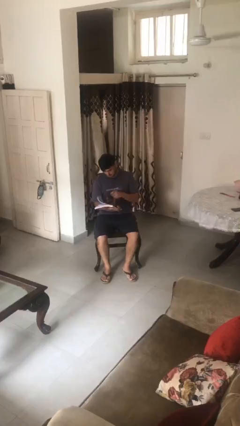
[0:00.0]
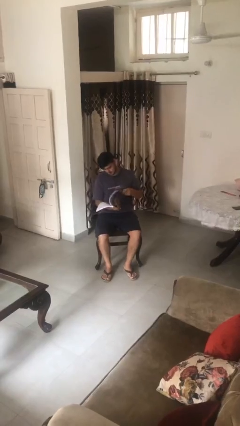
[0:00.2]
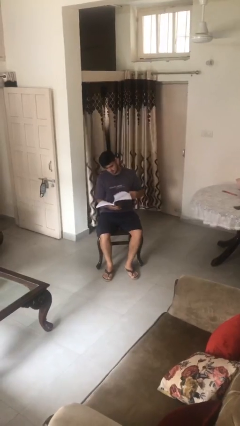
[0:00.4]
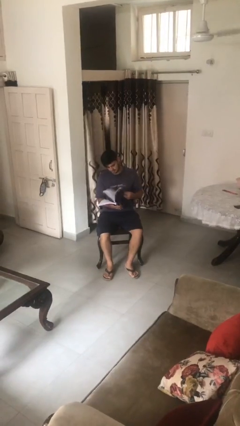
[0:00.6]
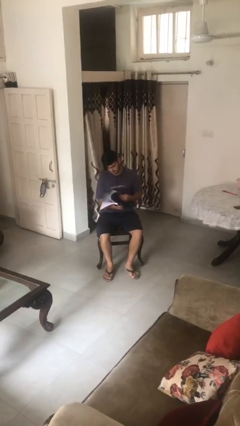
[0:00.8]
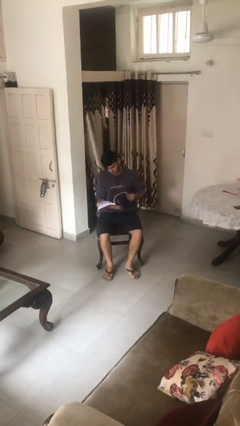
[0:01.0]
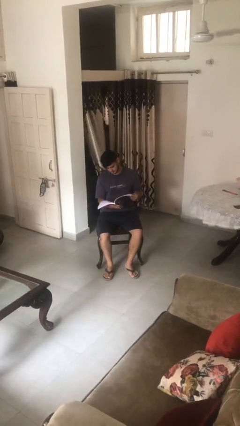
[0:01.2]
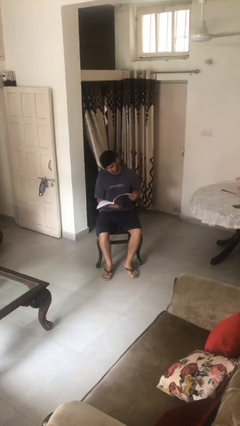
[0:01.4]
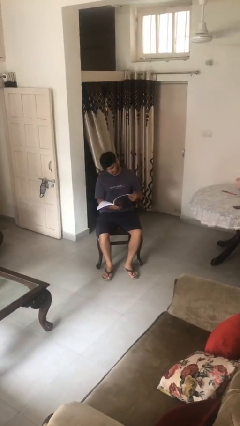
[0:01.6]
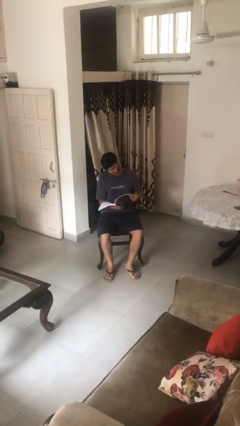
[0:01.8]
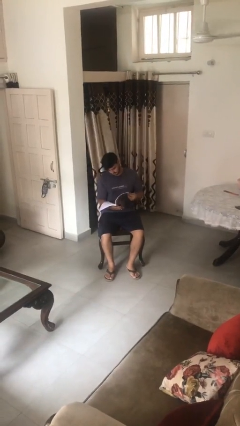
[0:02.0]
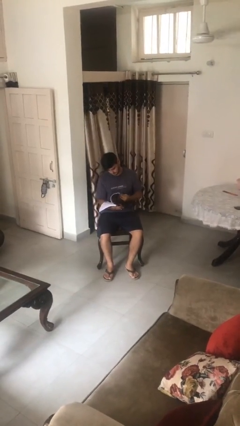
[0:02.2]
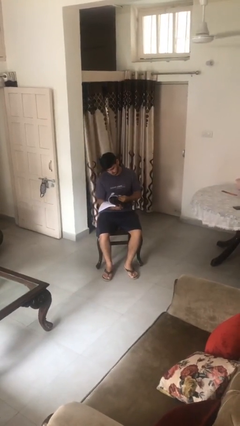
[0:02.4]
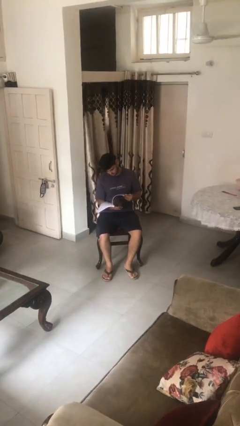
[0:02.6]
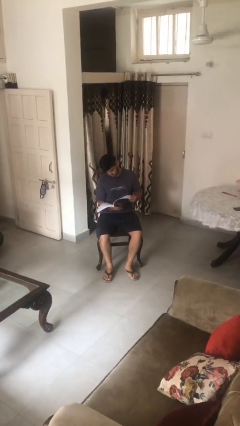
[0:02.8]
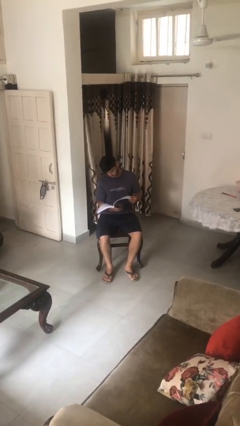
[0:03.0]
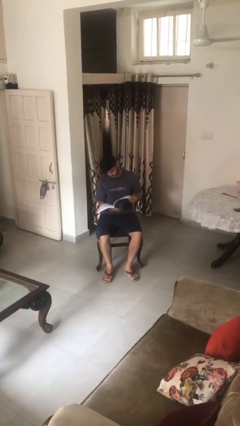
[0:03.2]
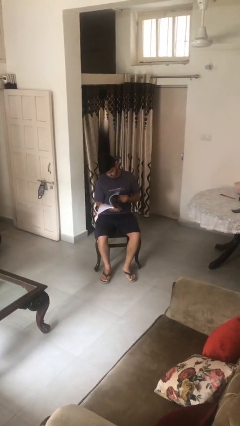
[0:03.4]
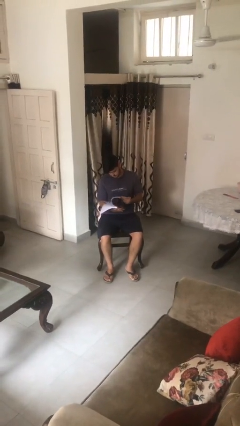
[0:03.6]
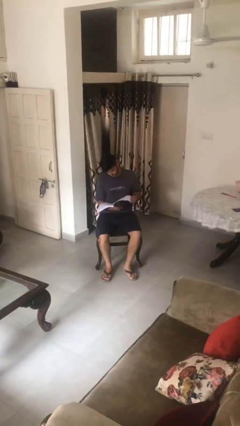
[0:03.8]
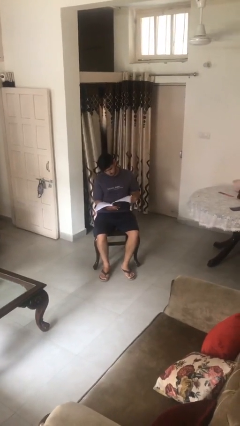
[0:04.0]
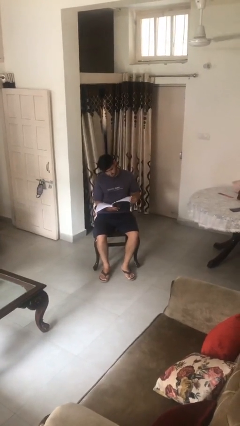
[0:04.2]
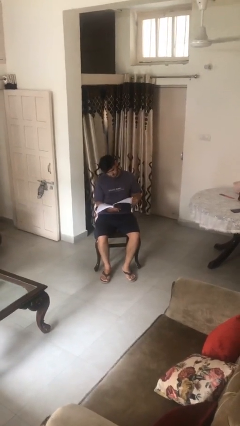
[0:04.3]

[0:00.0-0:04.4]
person reads document

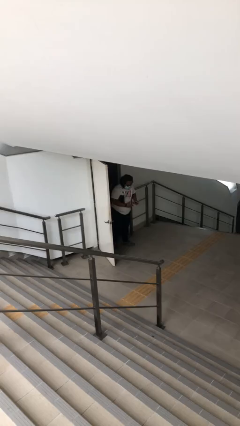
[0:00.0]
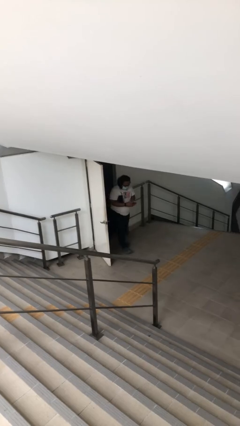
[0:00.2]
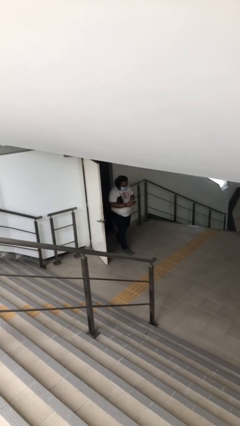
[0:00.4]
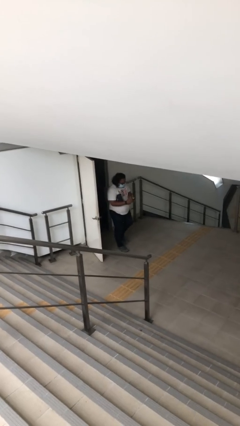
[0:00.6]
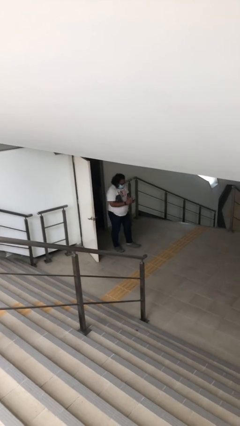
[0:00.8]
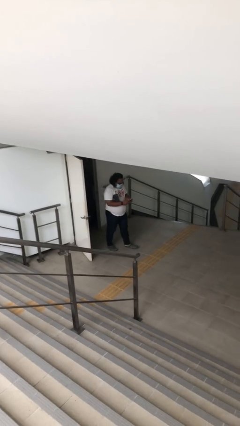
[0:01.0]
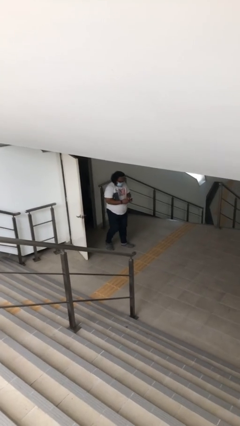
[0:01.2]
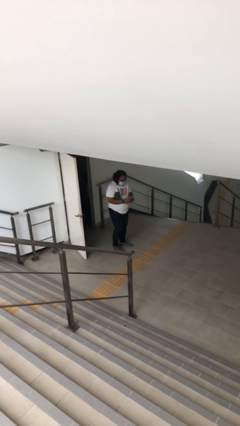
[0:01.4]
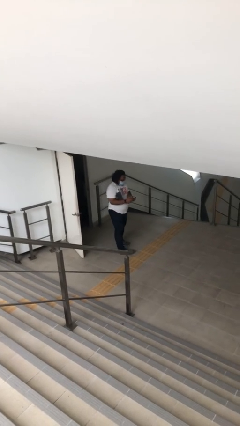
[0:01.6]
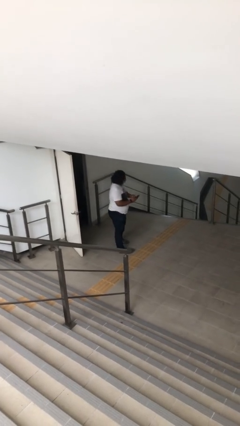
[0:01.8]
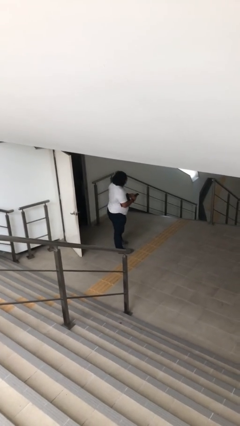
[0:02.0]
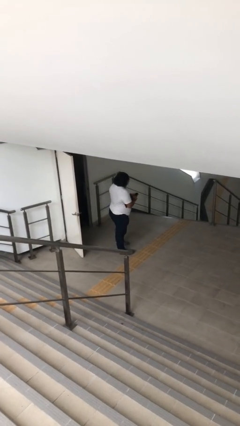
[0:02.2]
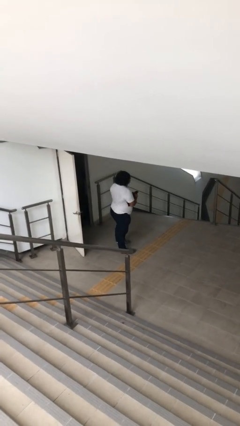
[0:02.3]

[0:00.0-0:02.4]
person enters scene through structure

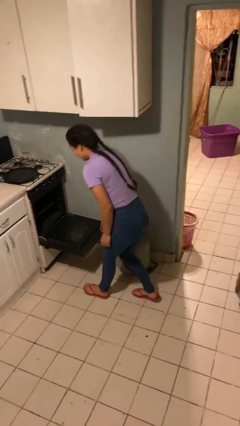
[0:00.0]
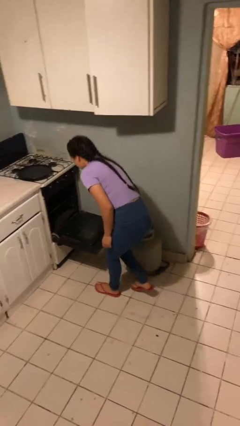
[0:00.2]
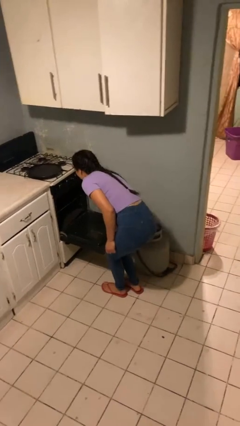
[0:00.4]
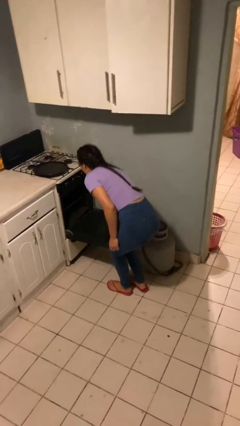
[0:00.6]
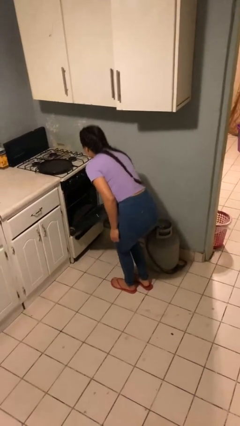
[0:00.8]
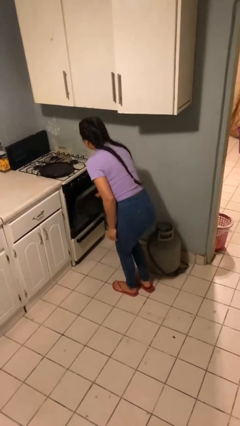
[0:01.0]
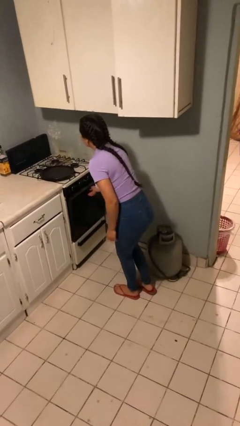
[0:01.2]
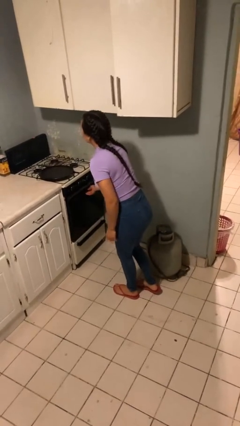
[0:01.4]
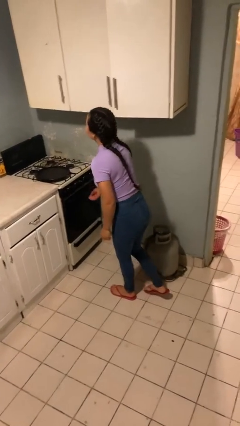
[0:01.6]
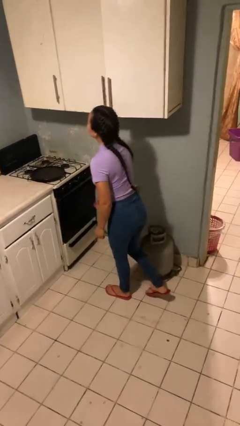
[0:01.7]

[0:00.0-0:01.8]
person closes oven door

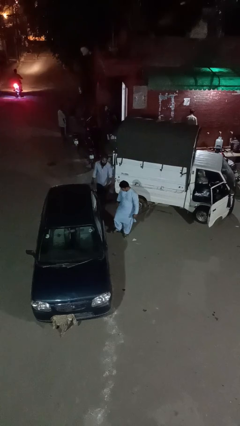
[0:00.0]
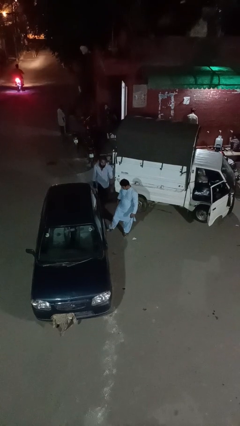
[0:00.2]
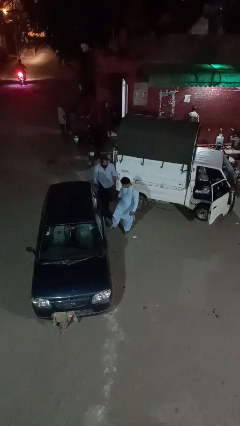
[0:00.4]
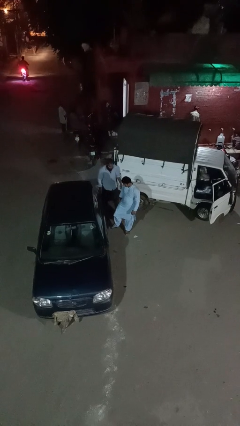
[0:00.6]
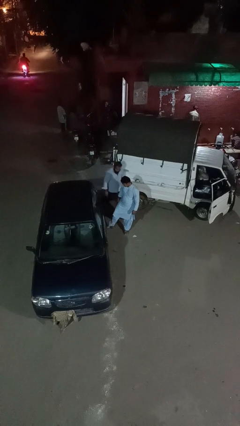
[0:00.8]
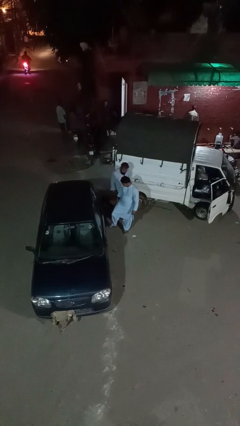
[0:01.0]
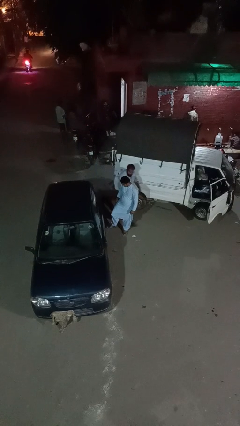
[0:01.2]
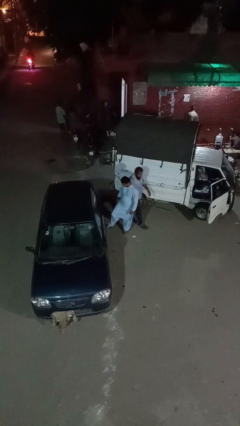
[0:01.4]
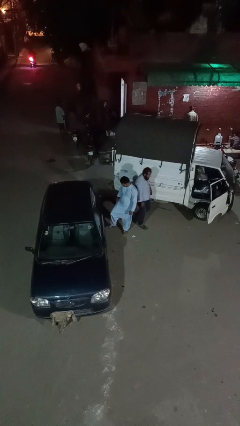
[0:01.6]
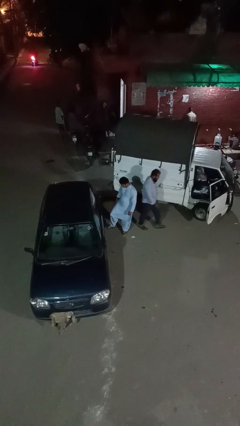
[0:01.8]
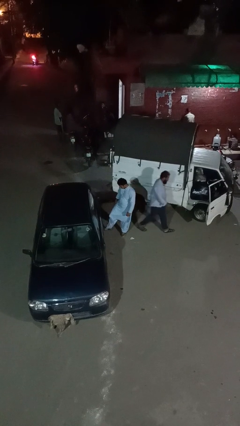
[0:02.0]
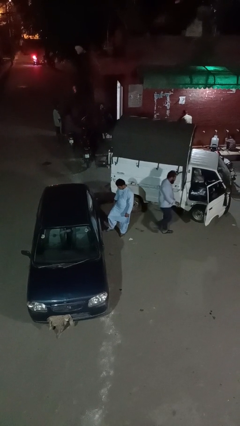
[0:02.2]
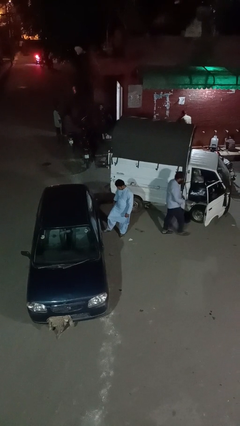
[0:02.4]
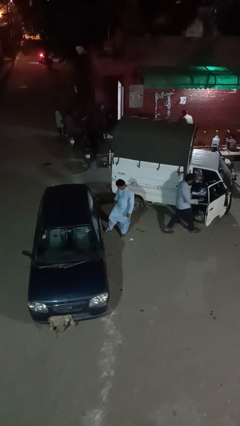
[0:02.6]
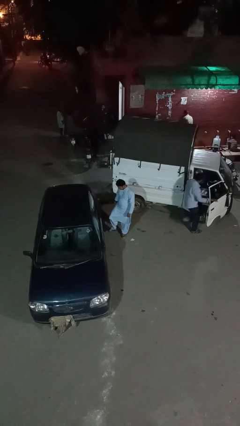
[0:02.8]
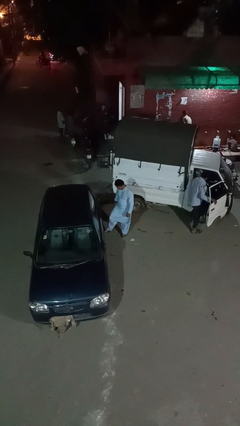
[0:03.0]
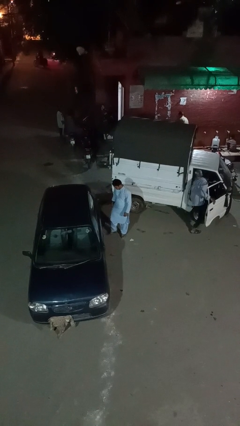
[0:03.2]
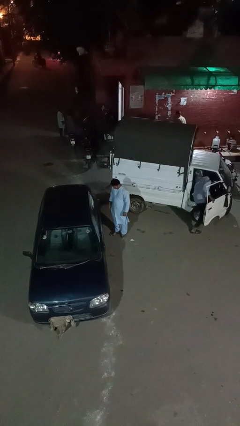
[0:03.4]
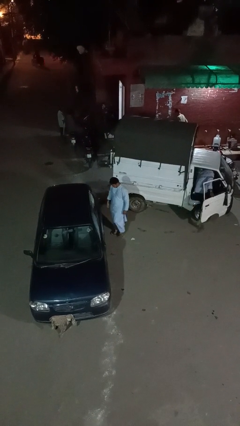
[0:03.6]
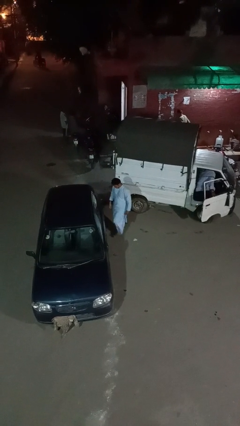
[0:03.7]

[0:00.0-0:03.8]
person kicks car tires

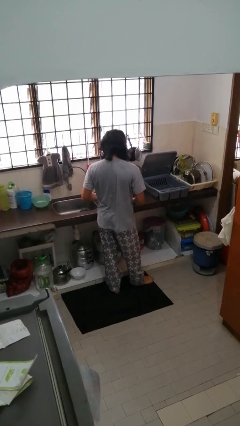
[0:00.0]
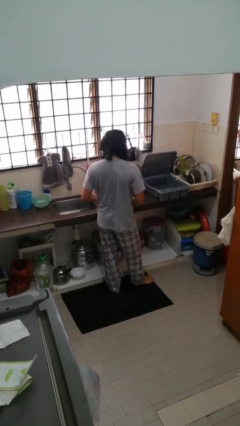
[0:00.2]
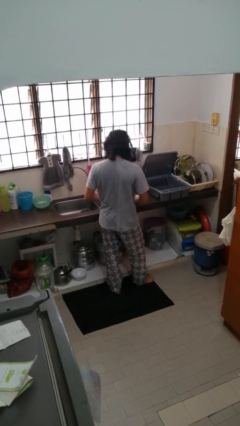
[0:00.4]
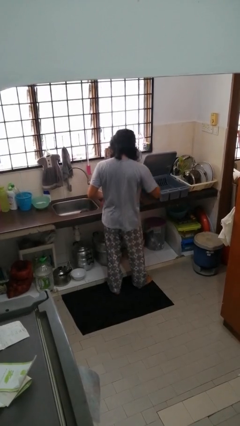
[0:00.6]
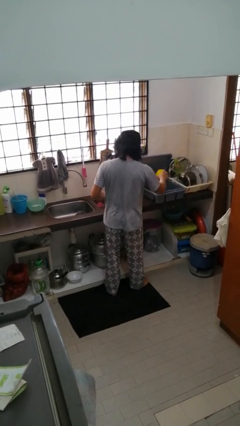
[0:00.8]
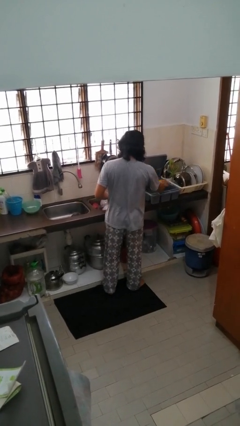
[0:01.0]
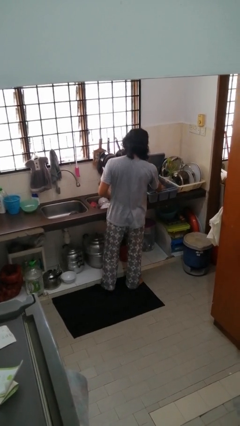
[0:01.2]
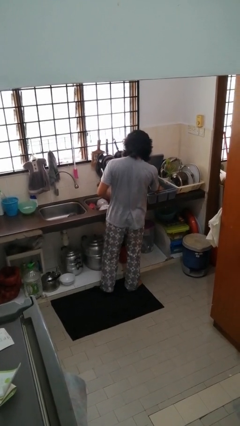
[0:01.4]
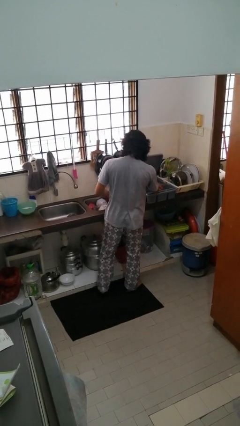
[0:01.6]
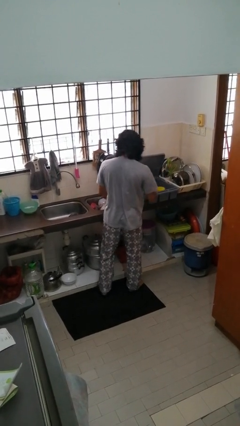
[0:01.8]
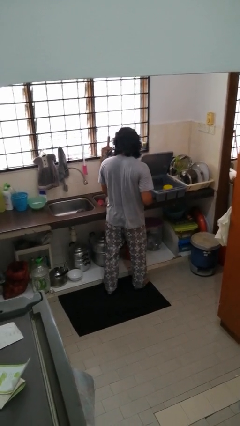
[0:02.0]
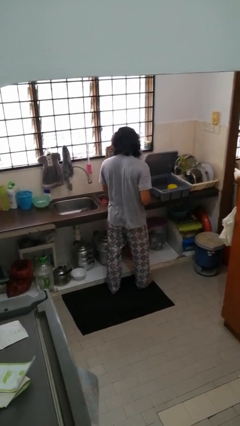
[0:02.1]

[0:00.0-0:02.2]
person loads dishwasher

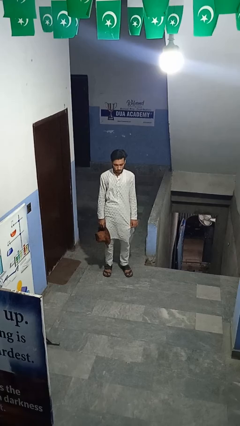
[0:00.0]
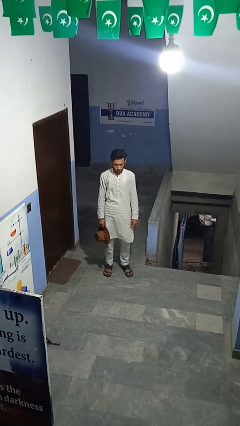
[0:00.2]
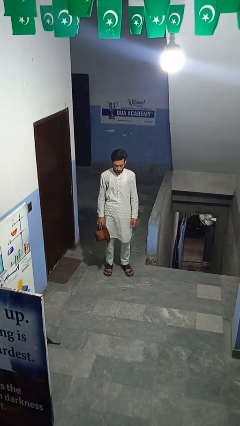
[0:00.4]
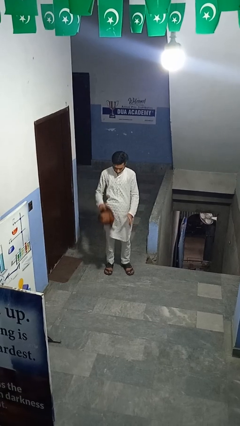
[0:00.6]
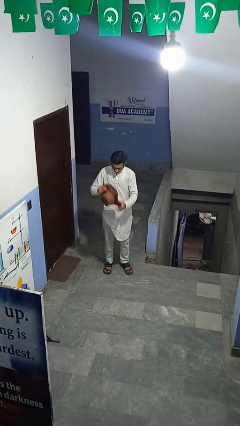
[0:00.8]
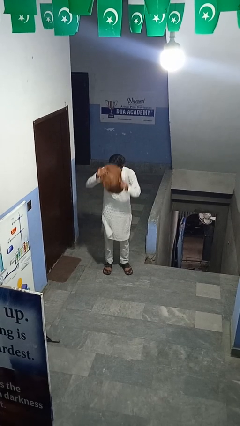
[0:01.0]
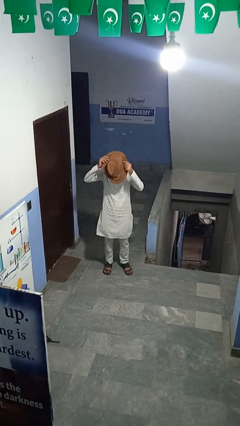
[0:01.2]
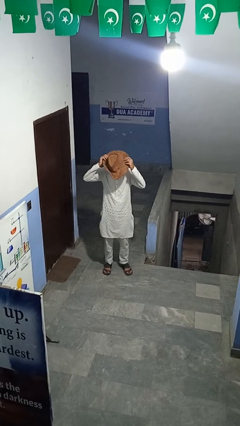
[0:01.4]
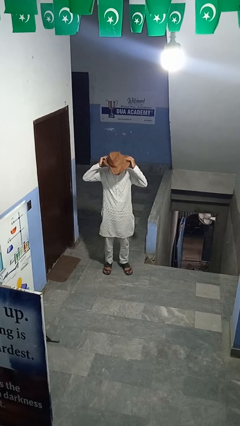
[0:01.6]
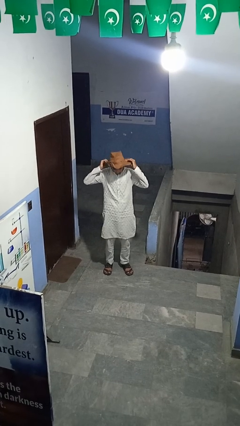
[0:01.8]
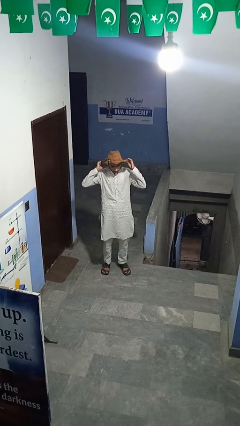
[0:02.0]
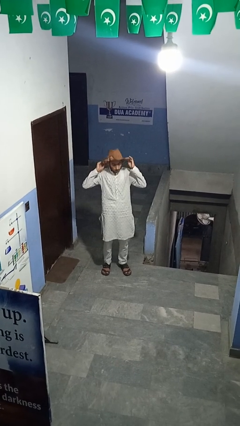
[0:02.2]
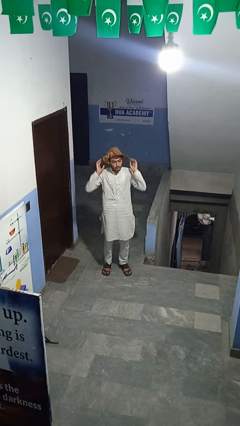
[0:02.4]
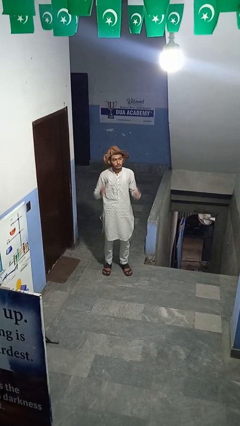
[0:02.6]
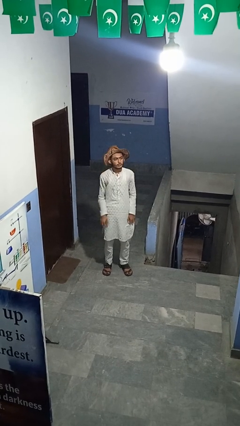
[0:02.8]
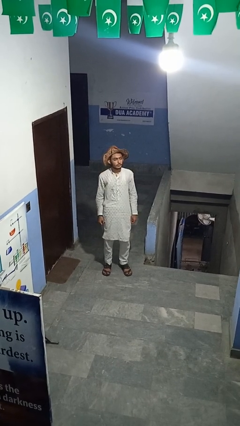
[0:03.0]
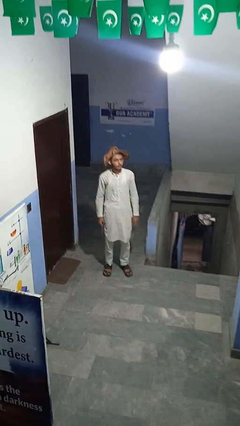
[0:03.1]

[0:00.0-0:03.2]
person puts on hat
